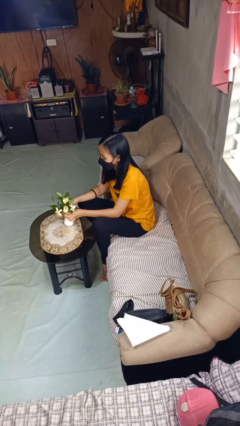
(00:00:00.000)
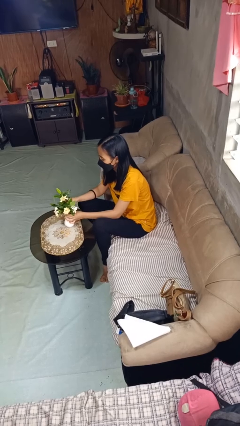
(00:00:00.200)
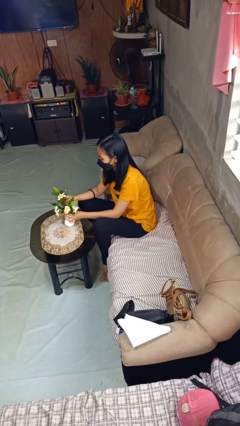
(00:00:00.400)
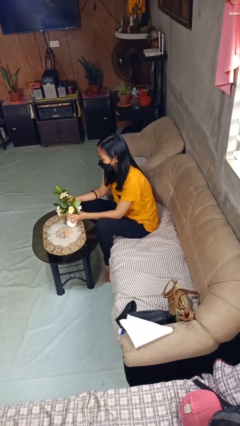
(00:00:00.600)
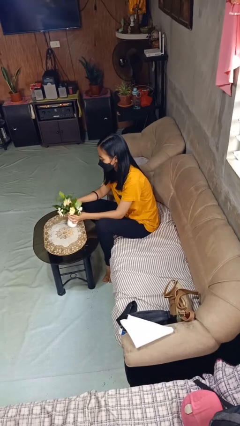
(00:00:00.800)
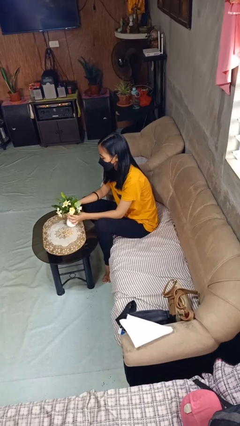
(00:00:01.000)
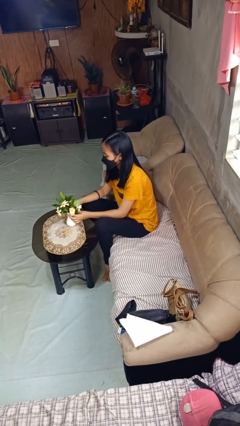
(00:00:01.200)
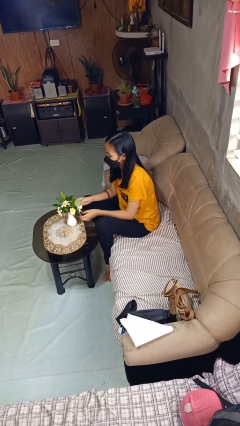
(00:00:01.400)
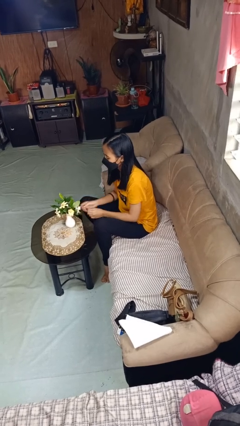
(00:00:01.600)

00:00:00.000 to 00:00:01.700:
person covers face with hands

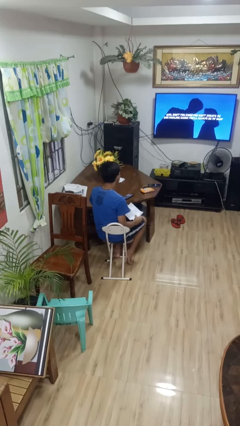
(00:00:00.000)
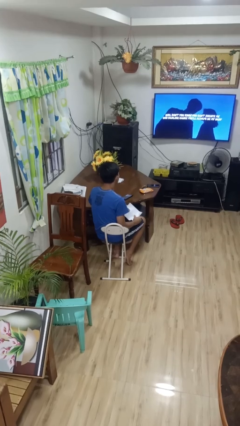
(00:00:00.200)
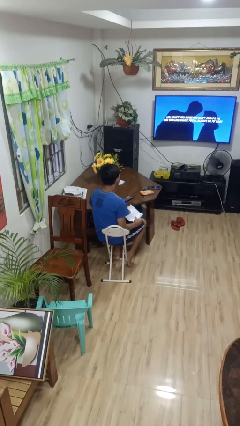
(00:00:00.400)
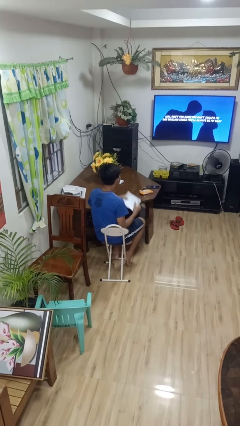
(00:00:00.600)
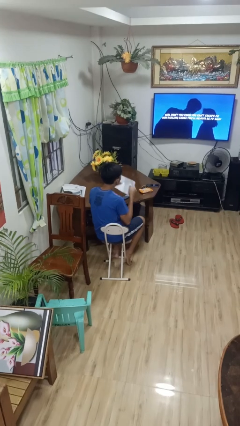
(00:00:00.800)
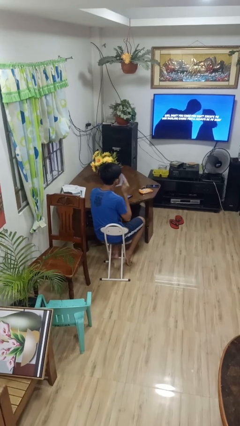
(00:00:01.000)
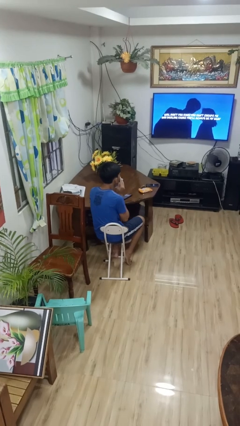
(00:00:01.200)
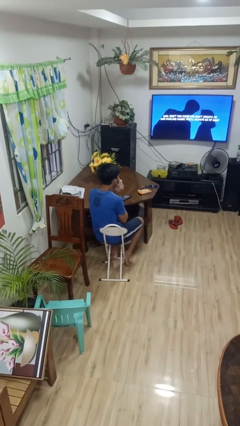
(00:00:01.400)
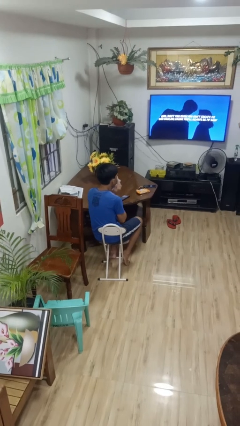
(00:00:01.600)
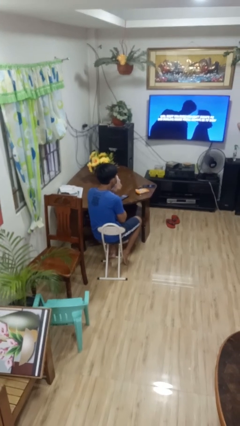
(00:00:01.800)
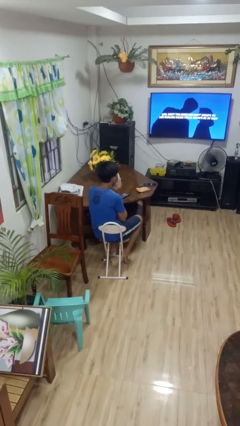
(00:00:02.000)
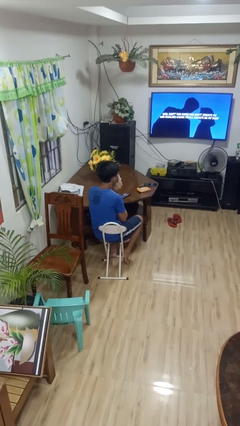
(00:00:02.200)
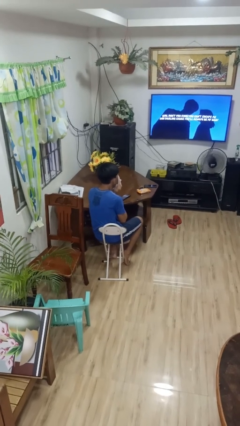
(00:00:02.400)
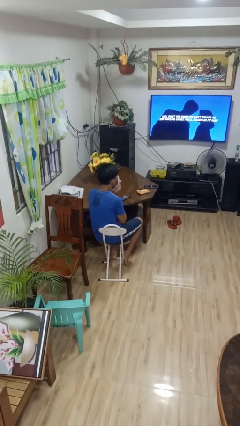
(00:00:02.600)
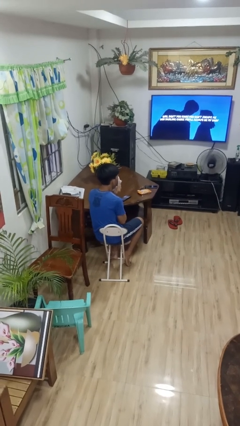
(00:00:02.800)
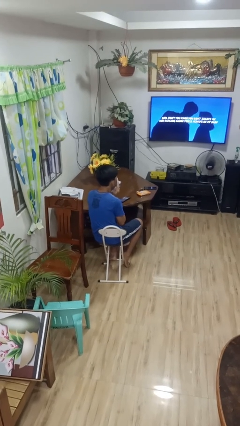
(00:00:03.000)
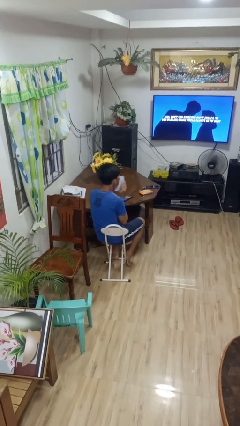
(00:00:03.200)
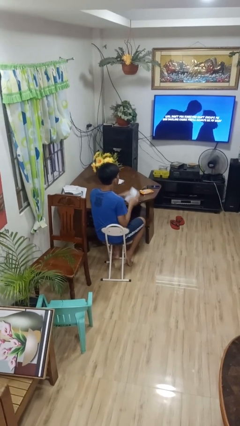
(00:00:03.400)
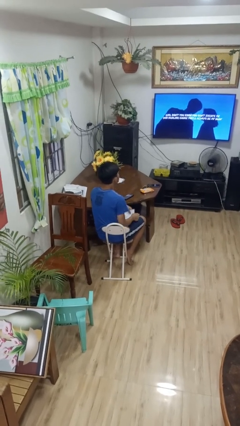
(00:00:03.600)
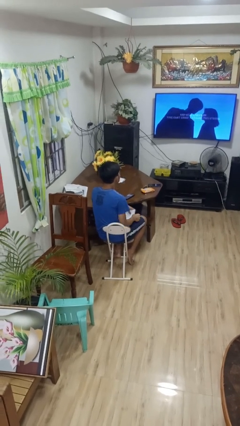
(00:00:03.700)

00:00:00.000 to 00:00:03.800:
person wipes mouth with napkin

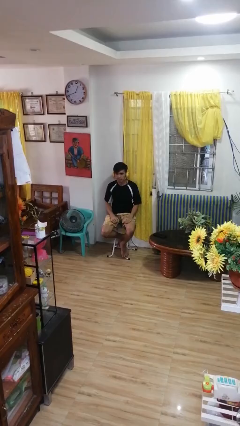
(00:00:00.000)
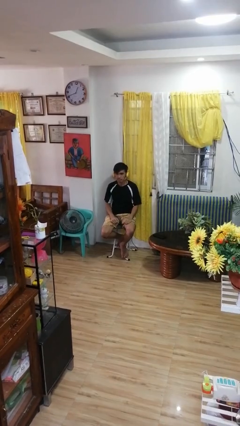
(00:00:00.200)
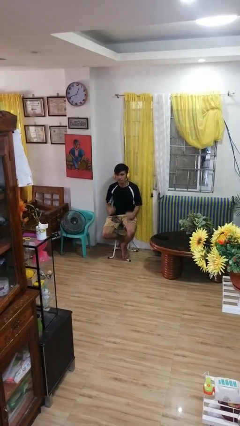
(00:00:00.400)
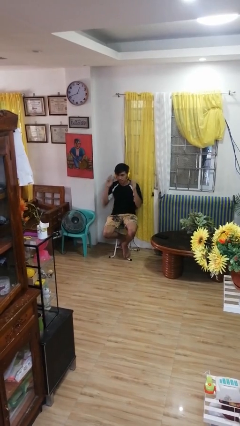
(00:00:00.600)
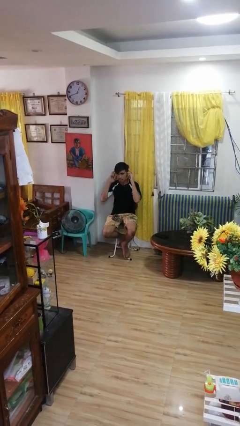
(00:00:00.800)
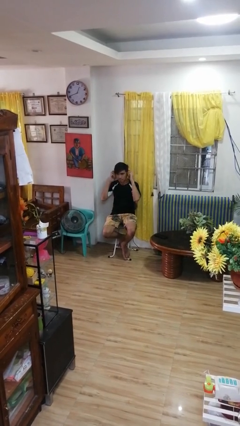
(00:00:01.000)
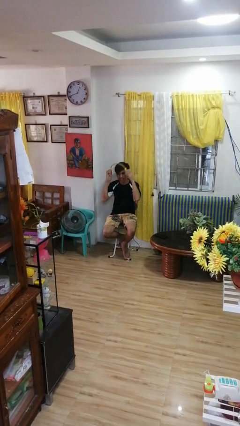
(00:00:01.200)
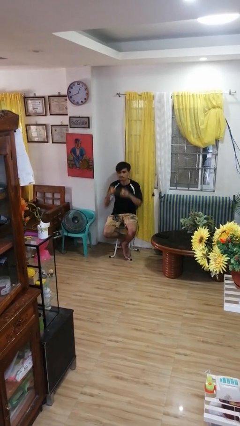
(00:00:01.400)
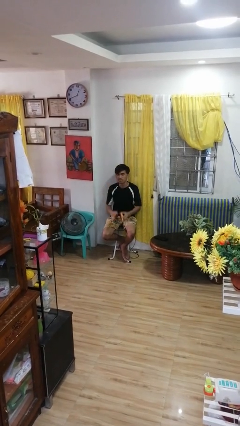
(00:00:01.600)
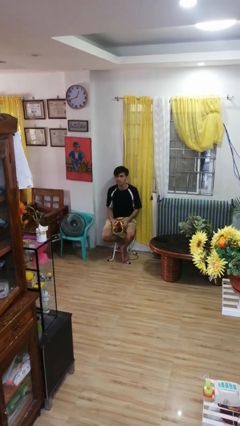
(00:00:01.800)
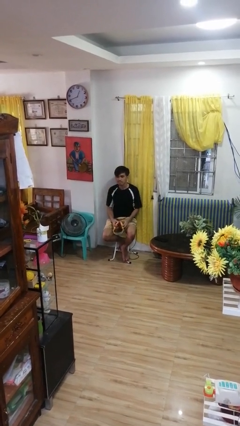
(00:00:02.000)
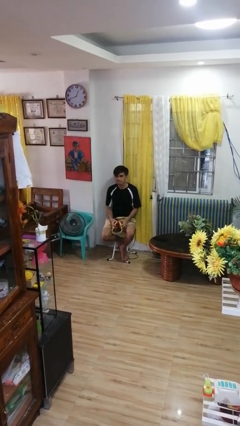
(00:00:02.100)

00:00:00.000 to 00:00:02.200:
person takes off headphones

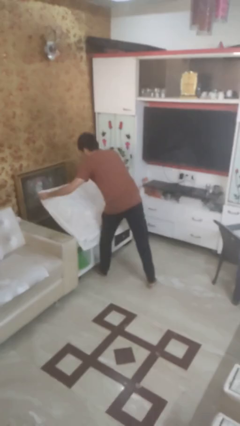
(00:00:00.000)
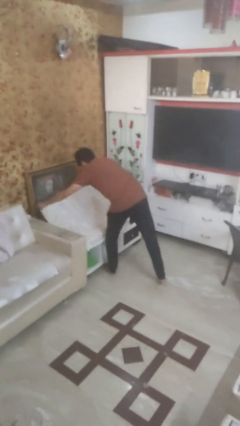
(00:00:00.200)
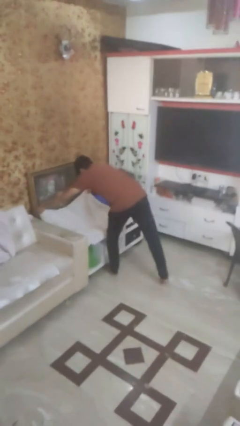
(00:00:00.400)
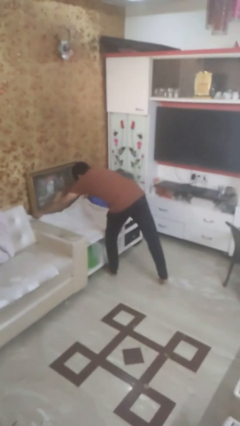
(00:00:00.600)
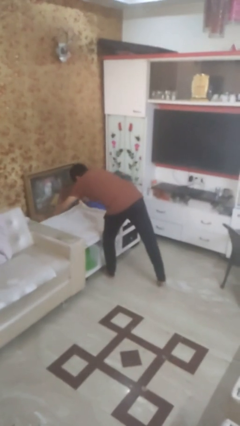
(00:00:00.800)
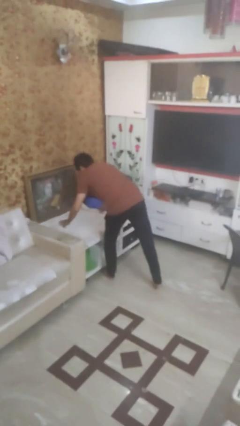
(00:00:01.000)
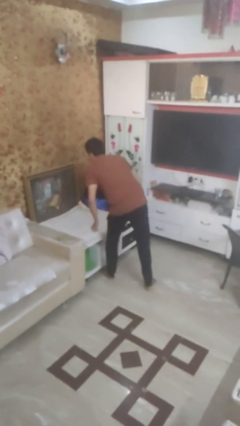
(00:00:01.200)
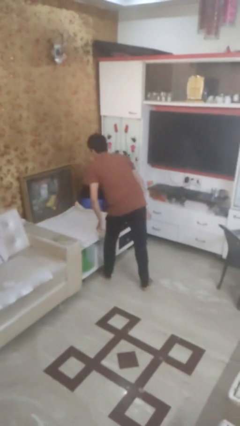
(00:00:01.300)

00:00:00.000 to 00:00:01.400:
person spreads tablecloth

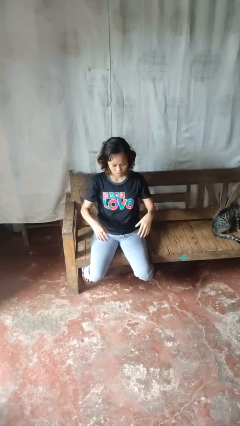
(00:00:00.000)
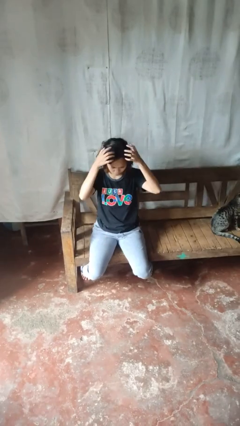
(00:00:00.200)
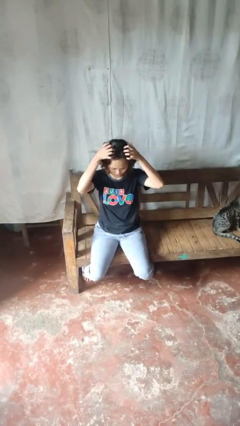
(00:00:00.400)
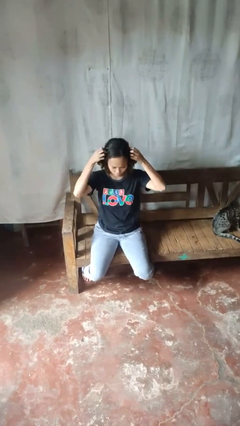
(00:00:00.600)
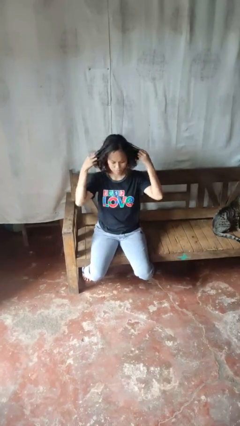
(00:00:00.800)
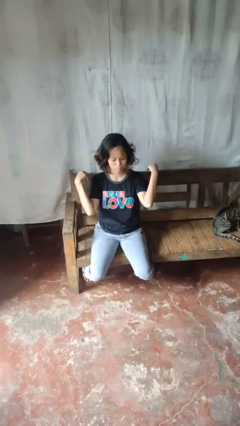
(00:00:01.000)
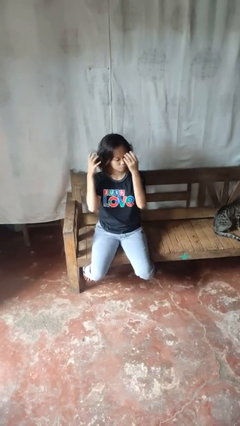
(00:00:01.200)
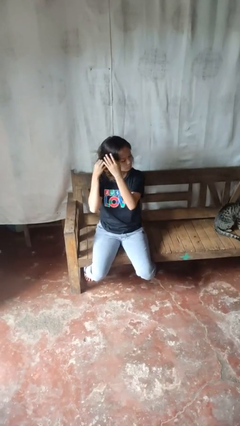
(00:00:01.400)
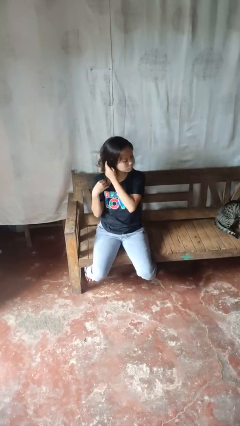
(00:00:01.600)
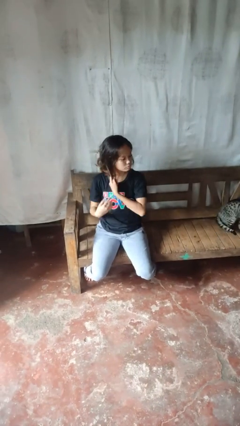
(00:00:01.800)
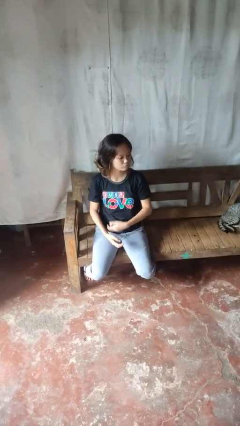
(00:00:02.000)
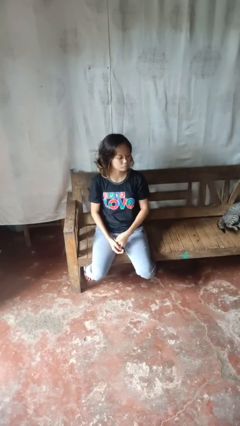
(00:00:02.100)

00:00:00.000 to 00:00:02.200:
person strokes hair

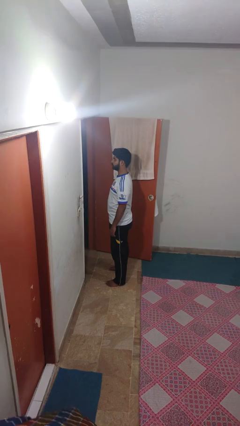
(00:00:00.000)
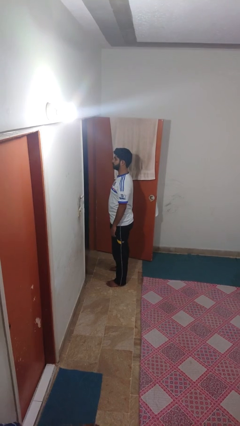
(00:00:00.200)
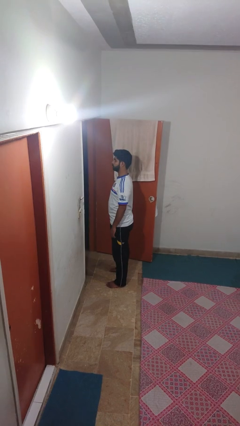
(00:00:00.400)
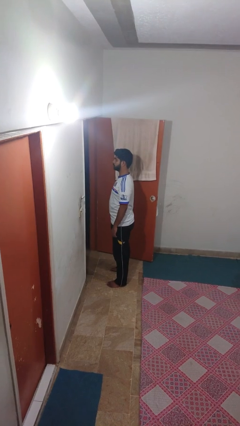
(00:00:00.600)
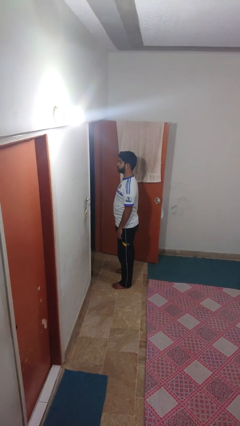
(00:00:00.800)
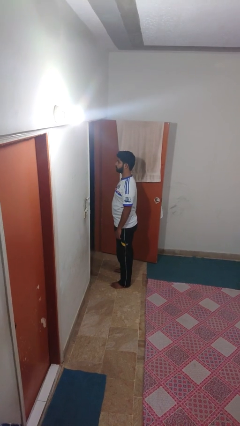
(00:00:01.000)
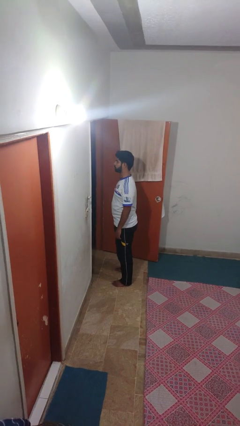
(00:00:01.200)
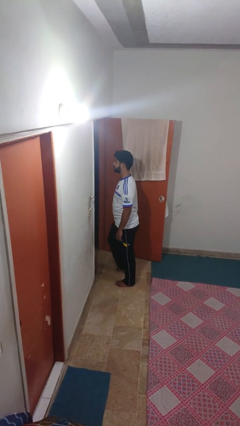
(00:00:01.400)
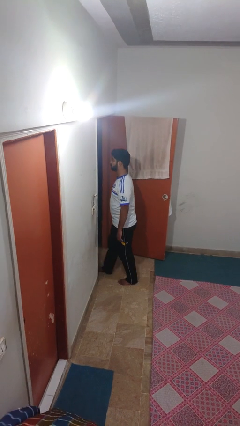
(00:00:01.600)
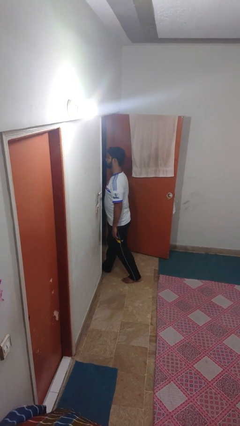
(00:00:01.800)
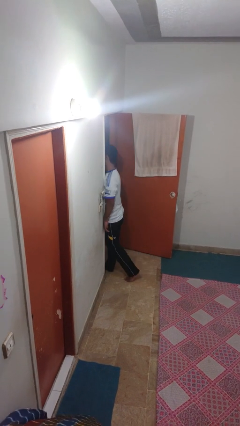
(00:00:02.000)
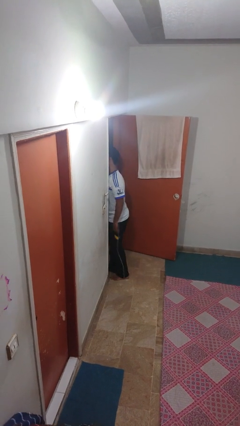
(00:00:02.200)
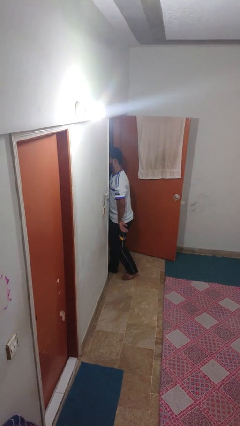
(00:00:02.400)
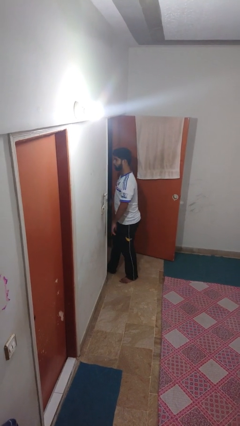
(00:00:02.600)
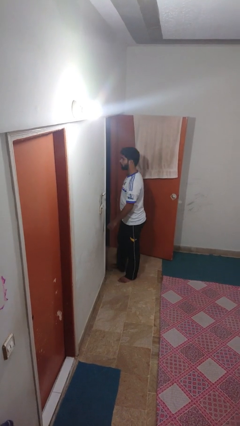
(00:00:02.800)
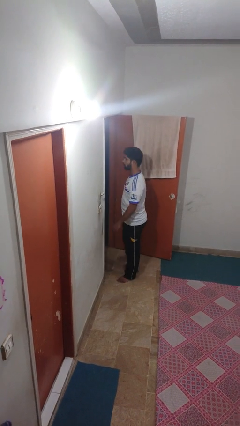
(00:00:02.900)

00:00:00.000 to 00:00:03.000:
person bumps into wall

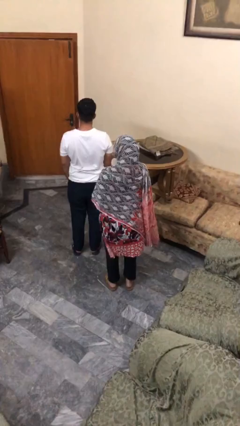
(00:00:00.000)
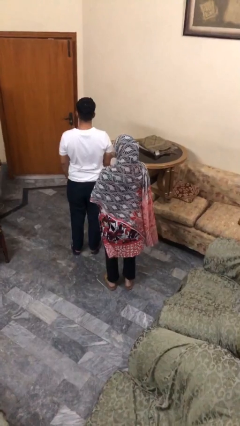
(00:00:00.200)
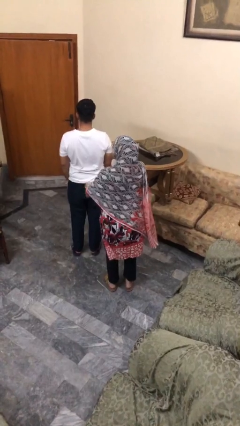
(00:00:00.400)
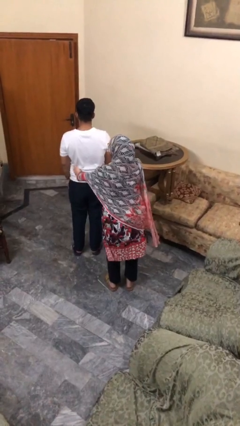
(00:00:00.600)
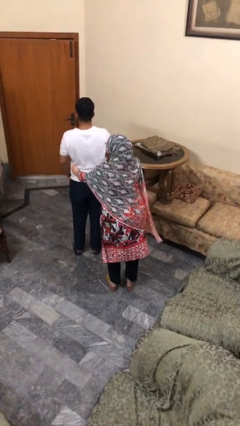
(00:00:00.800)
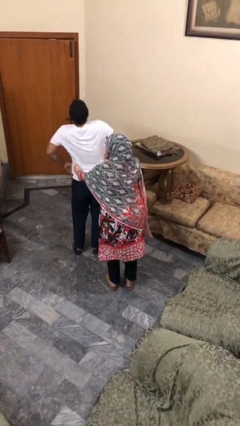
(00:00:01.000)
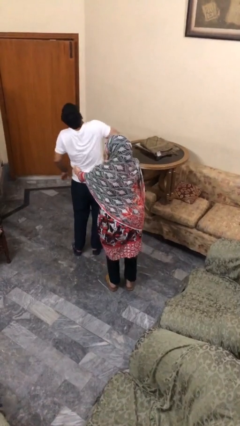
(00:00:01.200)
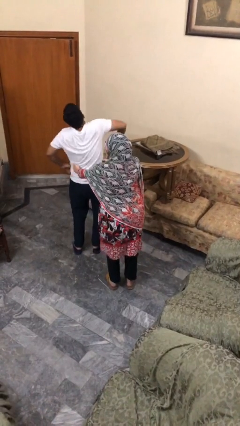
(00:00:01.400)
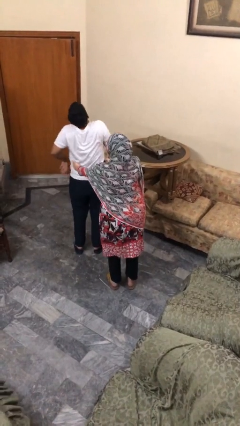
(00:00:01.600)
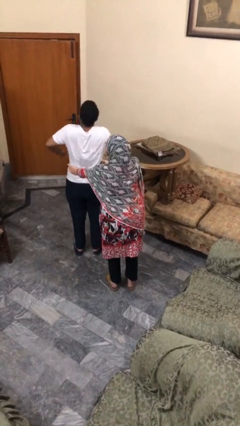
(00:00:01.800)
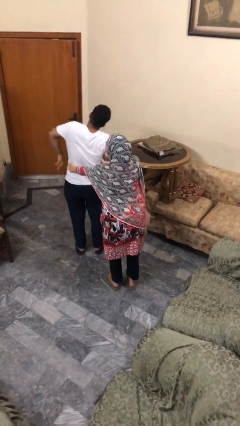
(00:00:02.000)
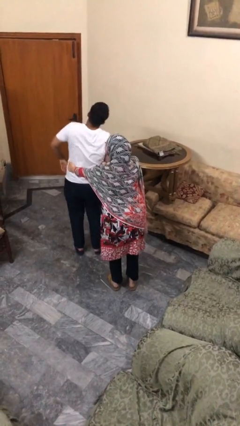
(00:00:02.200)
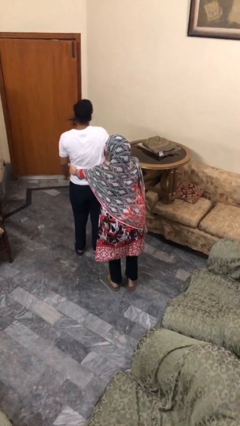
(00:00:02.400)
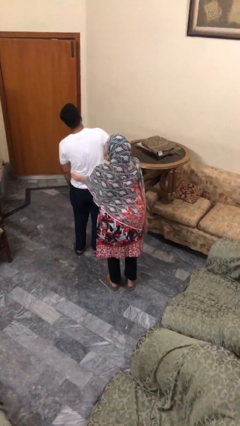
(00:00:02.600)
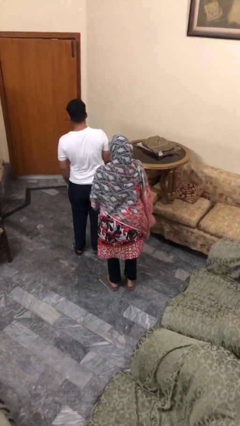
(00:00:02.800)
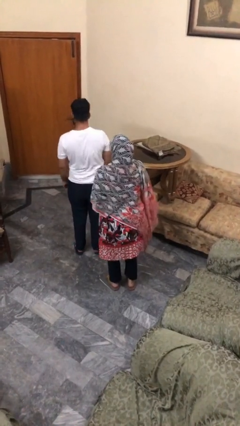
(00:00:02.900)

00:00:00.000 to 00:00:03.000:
person tickles person
